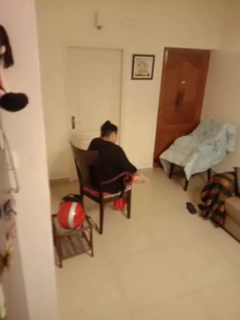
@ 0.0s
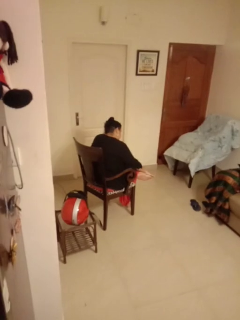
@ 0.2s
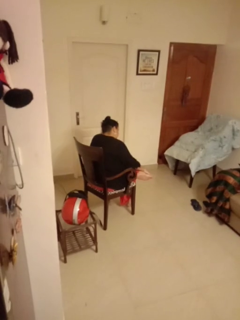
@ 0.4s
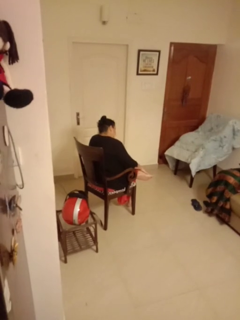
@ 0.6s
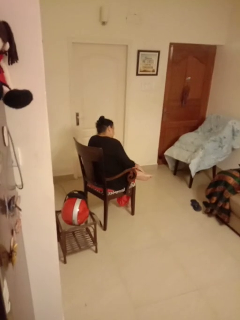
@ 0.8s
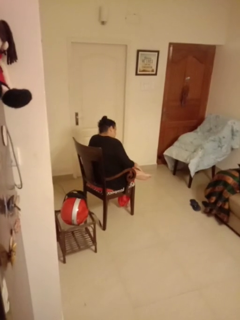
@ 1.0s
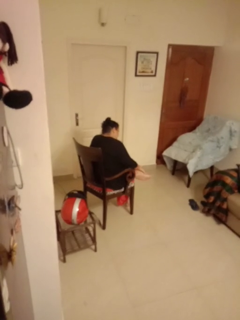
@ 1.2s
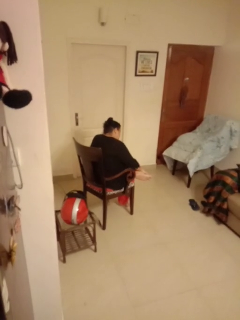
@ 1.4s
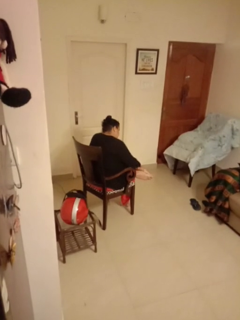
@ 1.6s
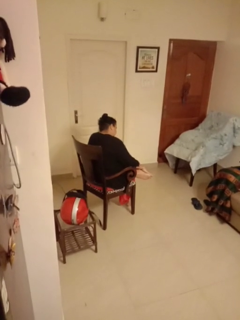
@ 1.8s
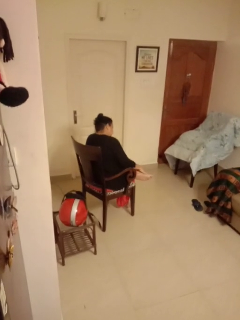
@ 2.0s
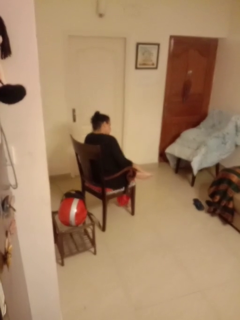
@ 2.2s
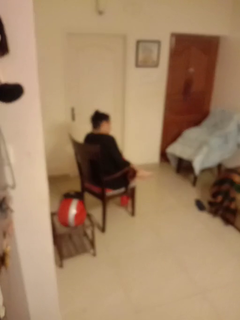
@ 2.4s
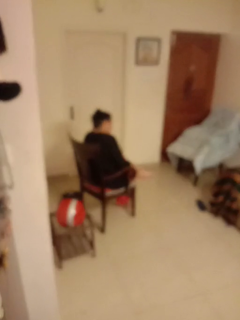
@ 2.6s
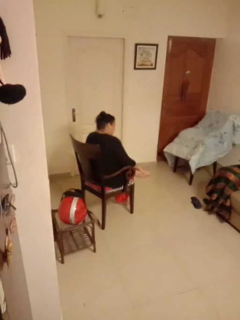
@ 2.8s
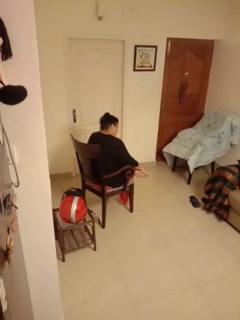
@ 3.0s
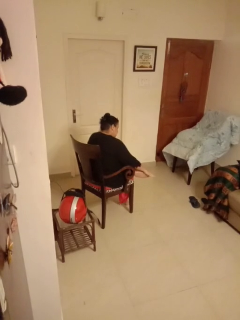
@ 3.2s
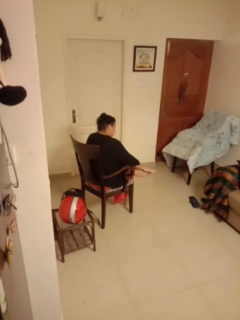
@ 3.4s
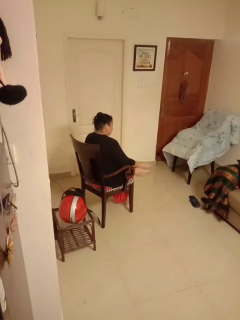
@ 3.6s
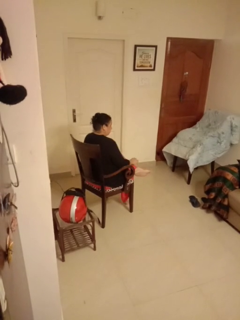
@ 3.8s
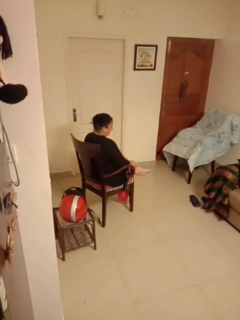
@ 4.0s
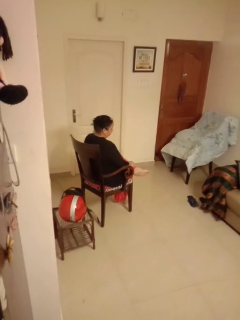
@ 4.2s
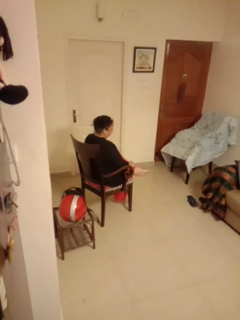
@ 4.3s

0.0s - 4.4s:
person rubs foot

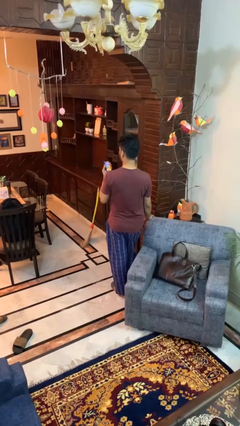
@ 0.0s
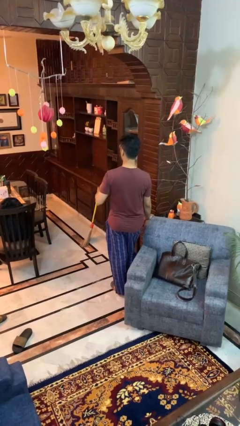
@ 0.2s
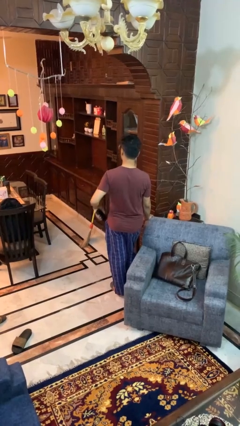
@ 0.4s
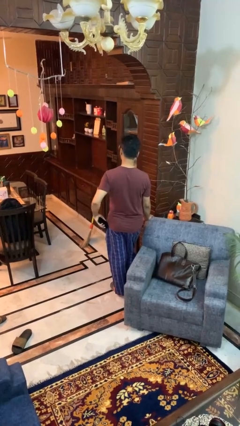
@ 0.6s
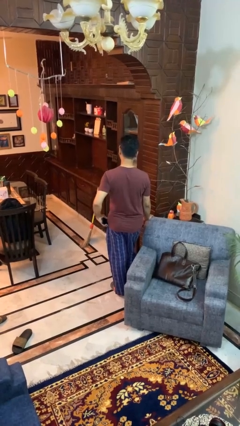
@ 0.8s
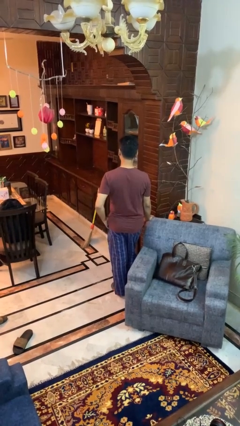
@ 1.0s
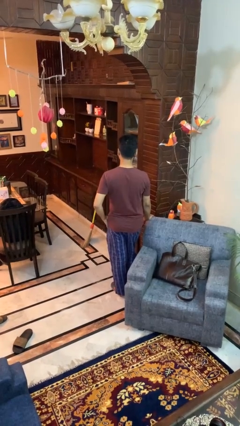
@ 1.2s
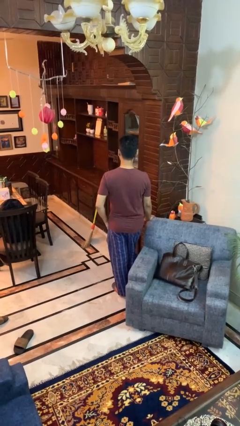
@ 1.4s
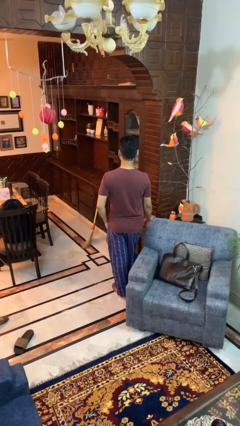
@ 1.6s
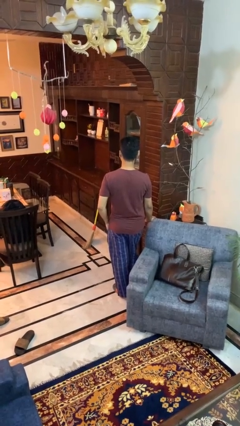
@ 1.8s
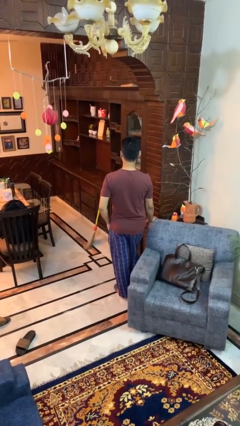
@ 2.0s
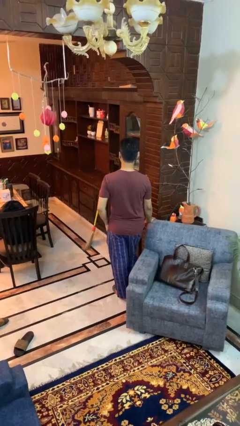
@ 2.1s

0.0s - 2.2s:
person puts phone into pocket

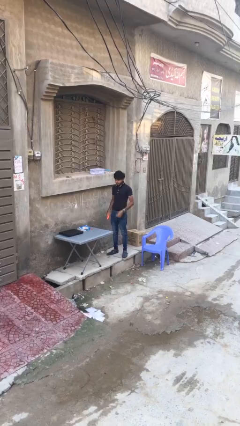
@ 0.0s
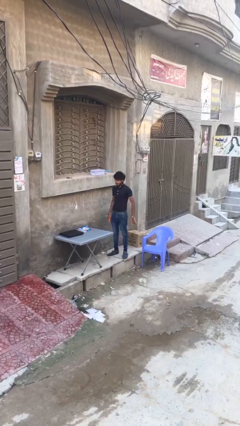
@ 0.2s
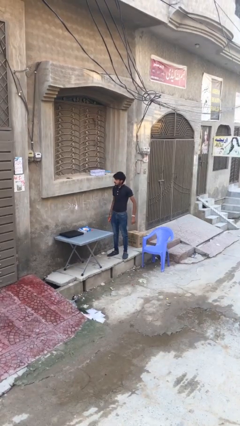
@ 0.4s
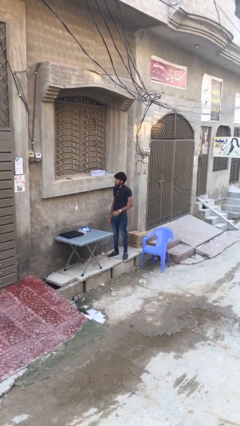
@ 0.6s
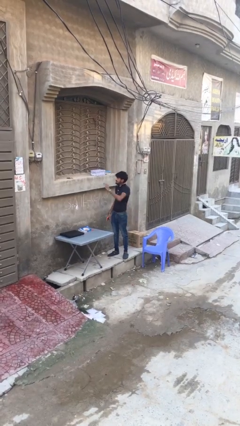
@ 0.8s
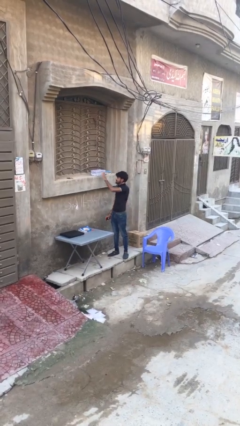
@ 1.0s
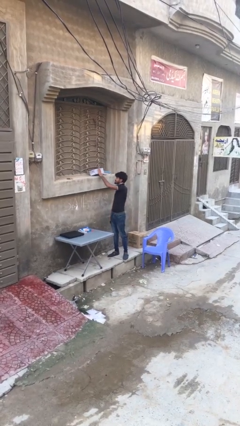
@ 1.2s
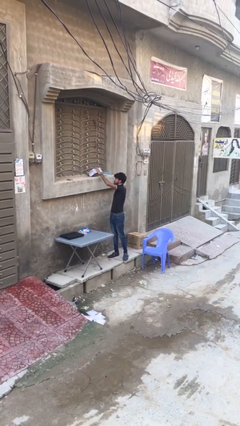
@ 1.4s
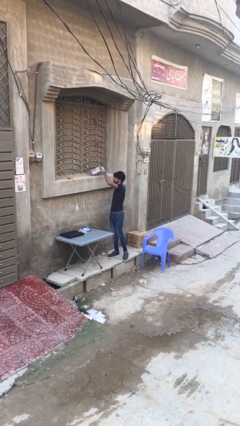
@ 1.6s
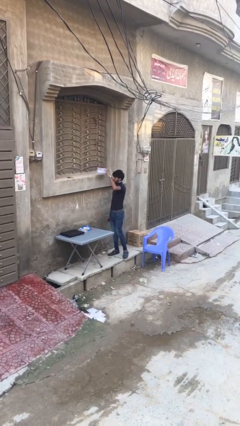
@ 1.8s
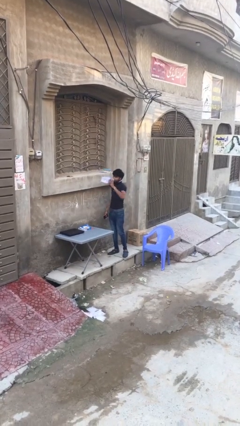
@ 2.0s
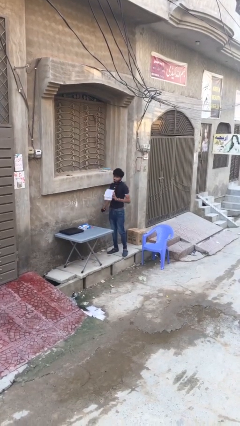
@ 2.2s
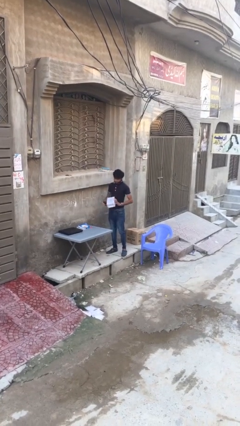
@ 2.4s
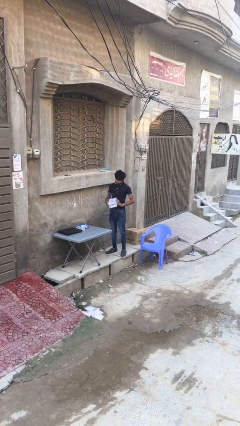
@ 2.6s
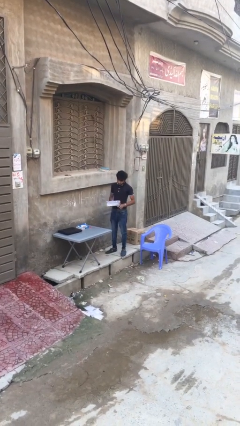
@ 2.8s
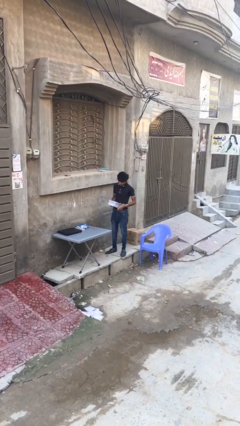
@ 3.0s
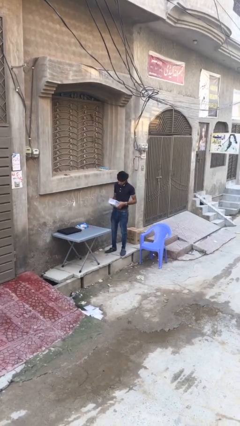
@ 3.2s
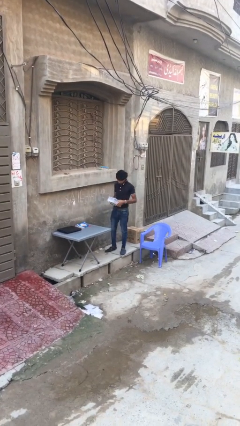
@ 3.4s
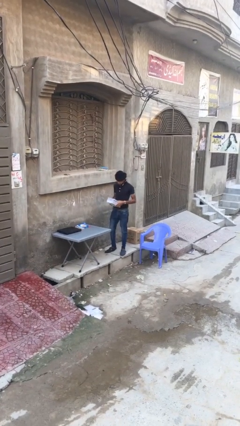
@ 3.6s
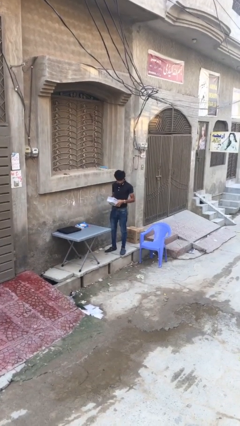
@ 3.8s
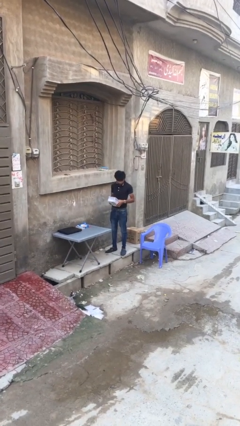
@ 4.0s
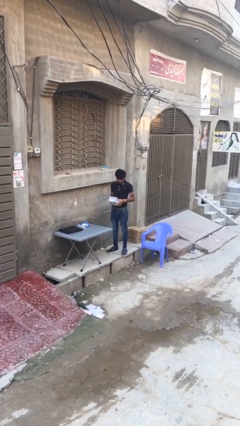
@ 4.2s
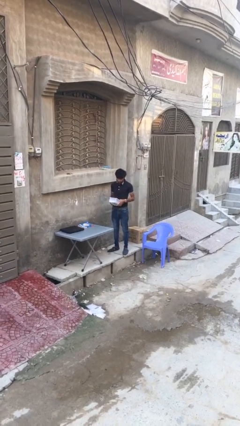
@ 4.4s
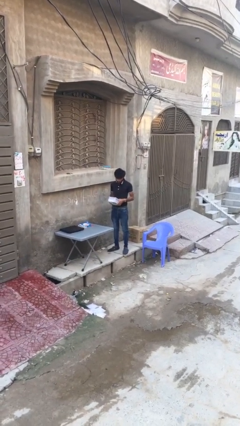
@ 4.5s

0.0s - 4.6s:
person picks up object from shelf

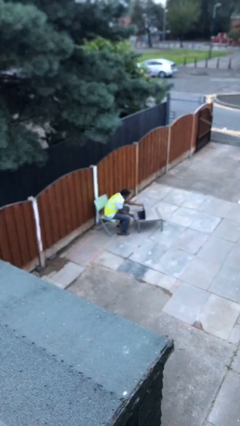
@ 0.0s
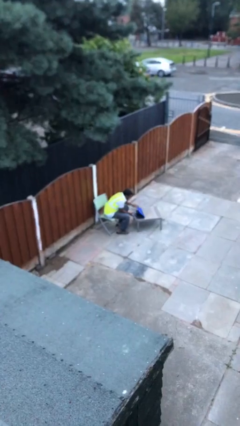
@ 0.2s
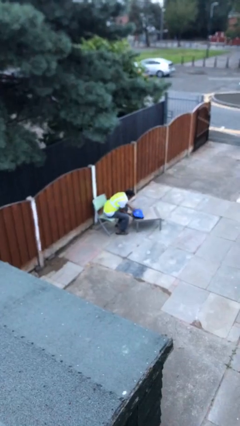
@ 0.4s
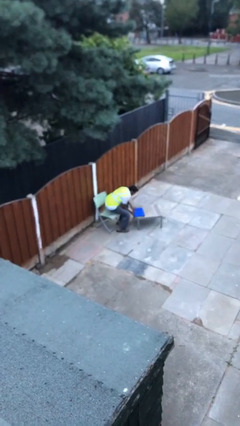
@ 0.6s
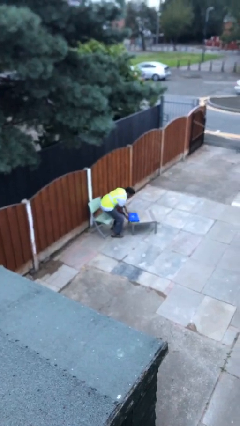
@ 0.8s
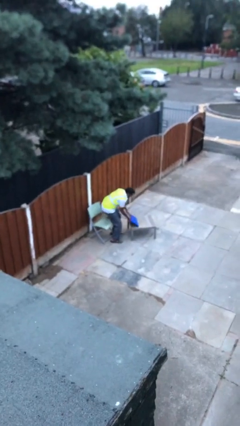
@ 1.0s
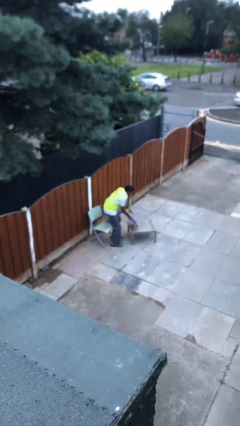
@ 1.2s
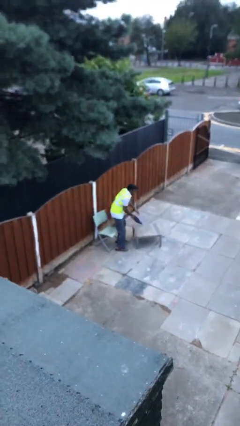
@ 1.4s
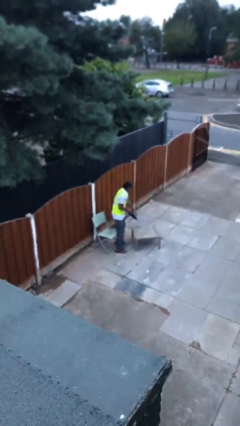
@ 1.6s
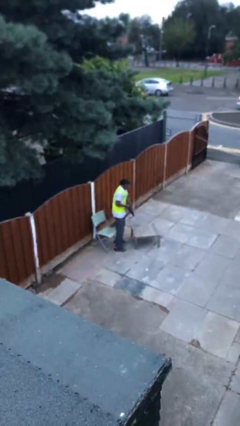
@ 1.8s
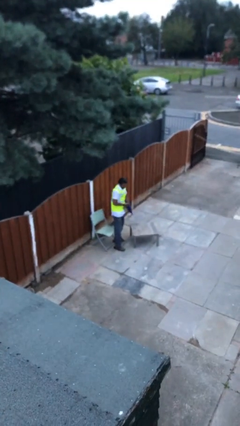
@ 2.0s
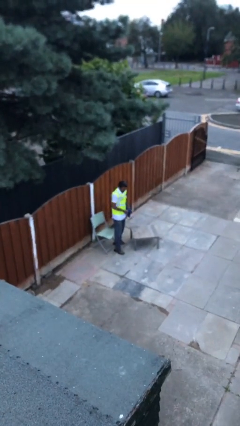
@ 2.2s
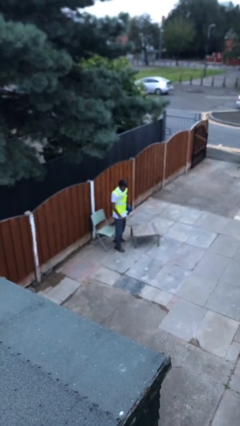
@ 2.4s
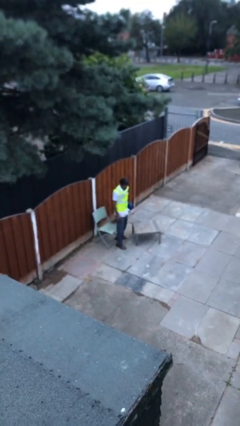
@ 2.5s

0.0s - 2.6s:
person stands up

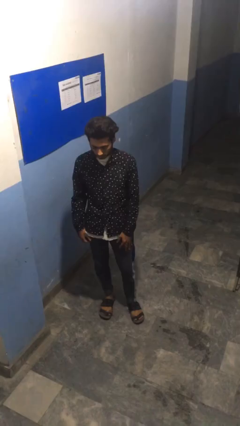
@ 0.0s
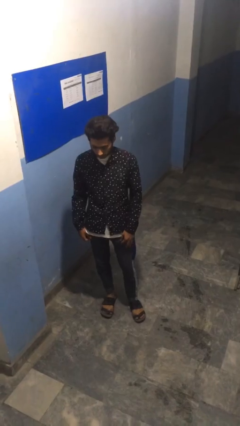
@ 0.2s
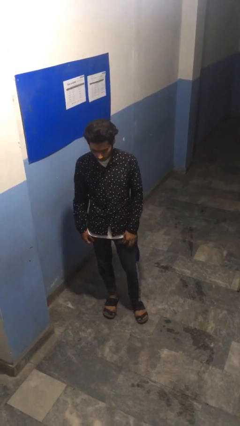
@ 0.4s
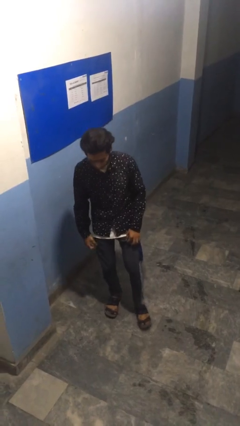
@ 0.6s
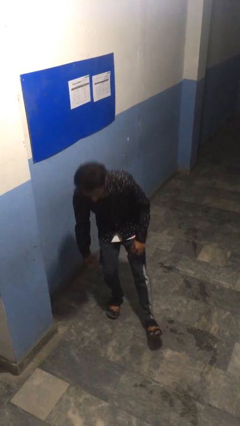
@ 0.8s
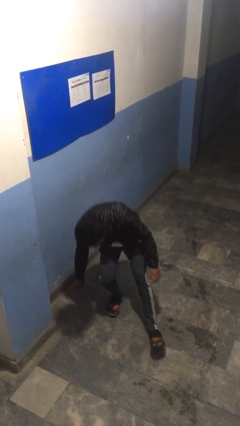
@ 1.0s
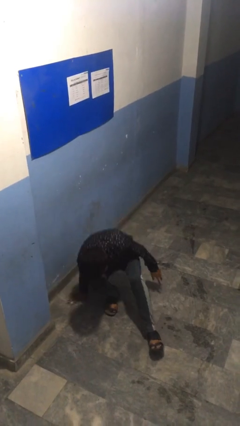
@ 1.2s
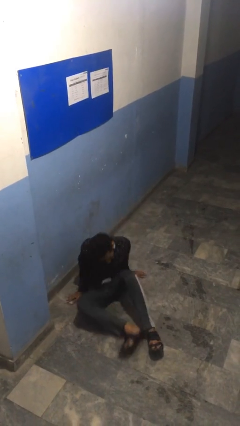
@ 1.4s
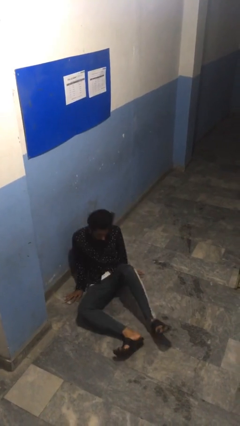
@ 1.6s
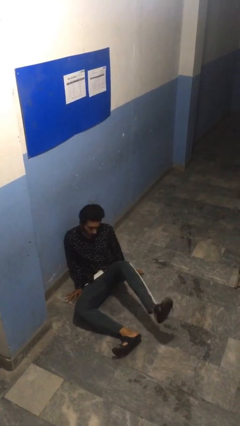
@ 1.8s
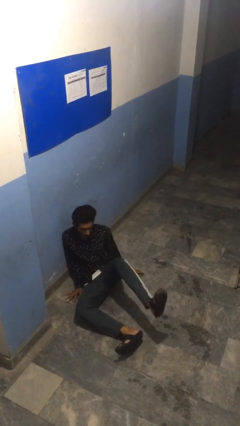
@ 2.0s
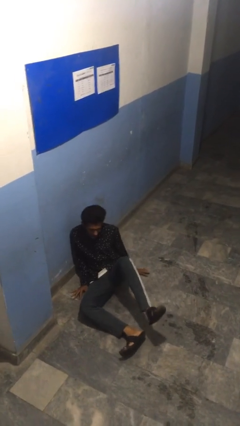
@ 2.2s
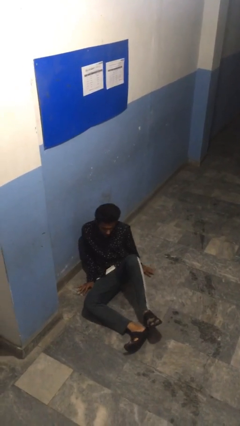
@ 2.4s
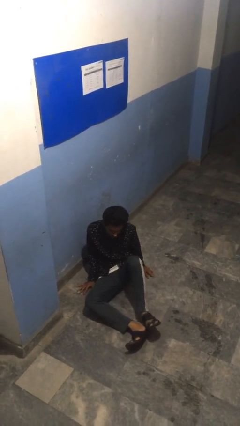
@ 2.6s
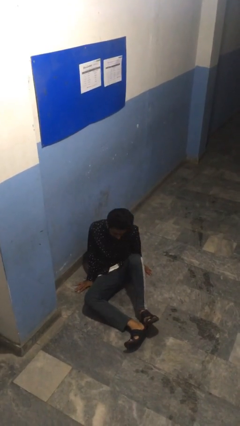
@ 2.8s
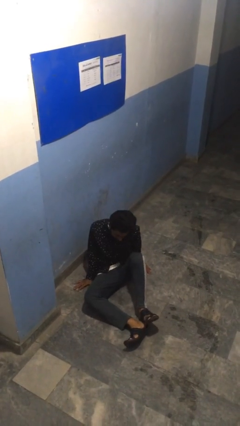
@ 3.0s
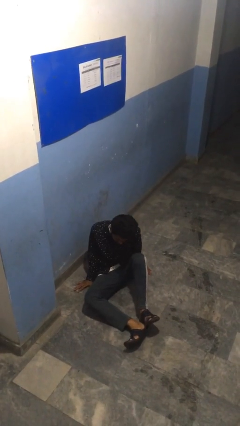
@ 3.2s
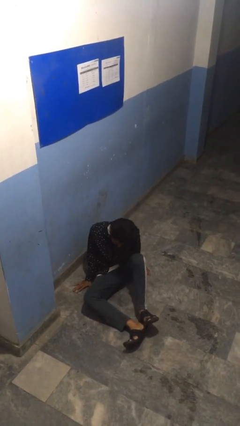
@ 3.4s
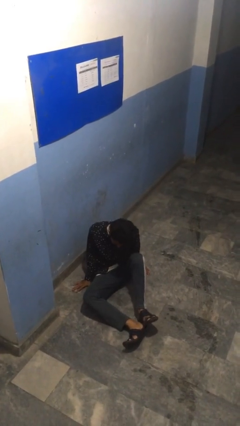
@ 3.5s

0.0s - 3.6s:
person falls while standing

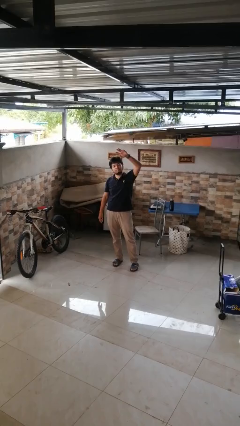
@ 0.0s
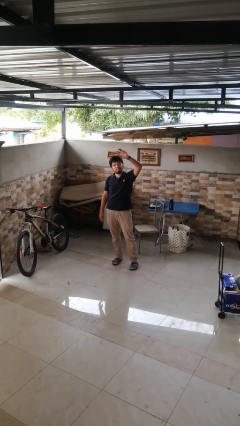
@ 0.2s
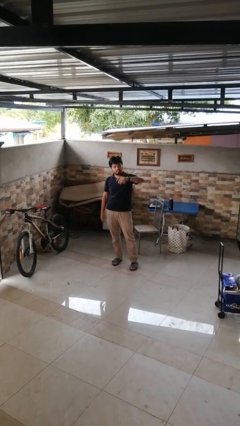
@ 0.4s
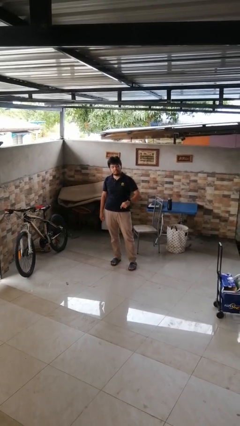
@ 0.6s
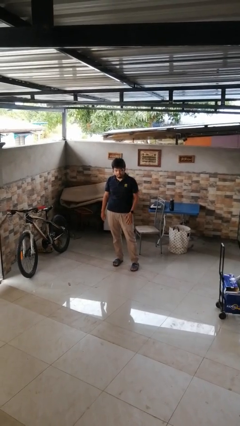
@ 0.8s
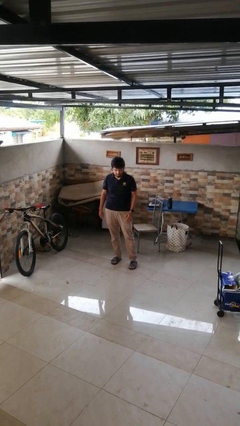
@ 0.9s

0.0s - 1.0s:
person gestures swipe down
